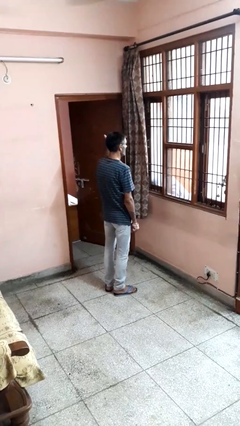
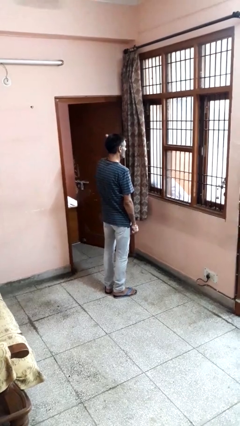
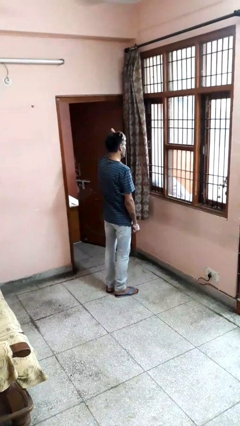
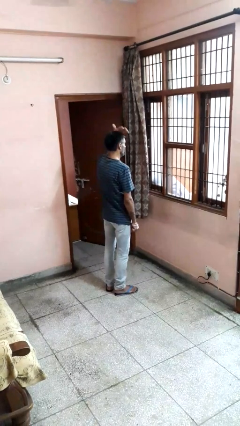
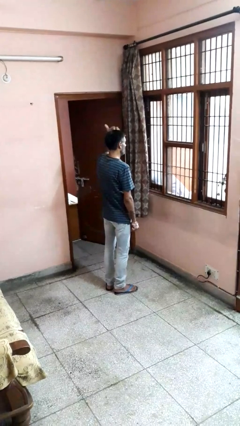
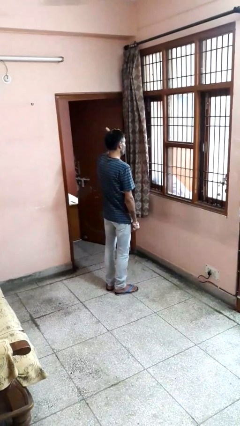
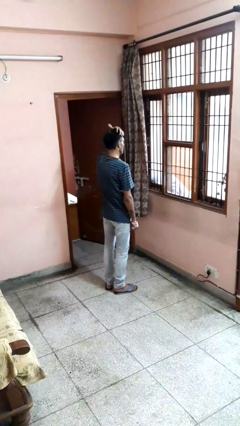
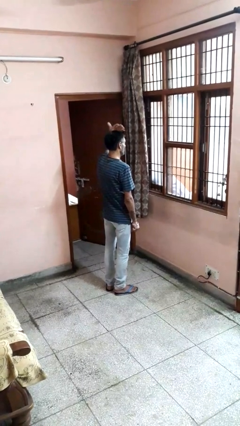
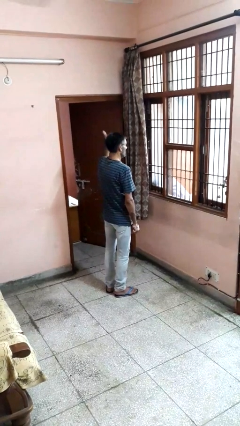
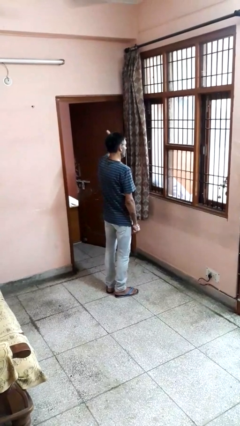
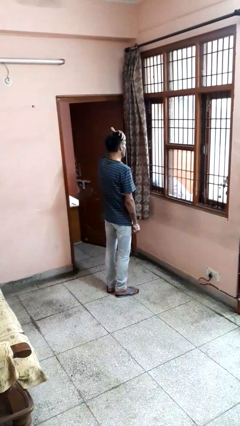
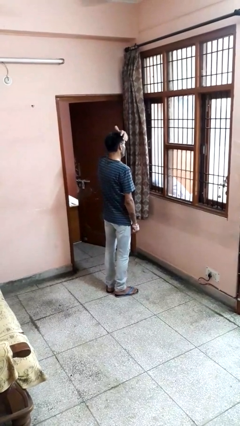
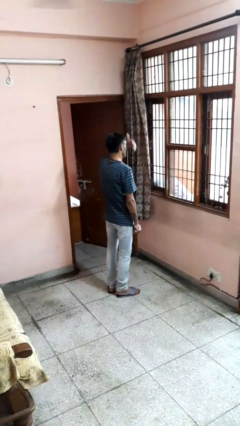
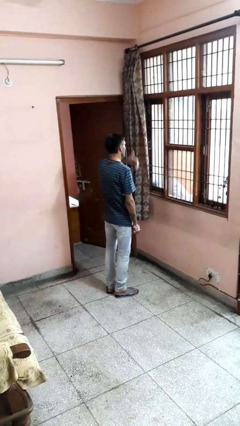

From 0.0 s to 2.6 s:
person strokes hair

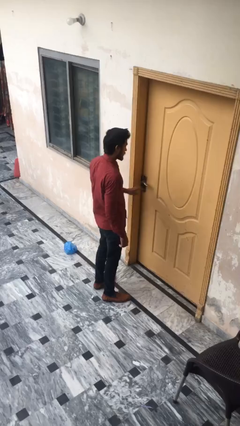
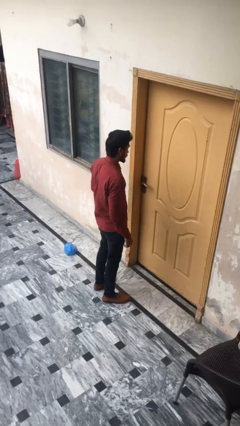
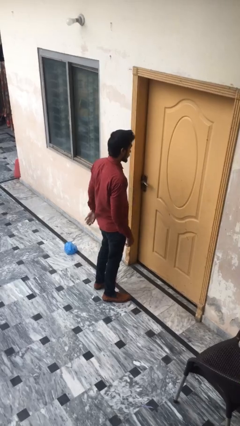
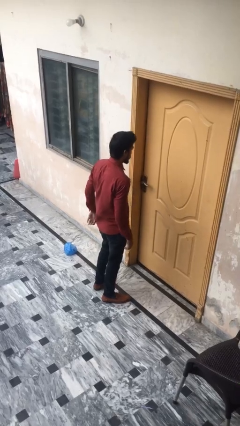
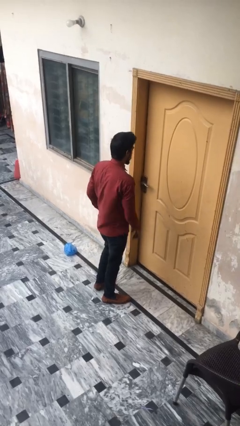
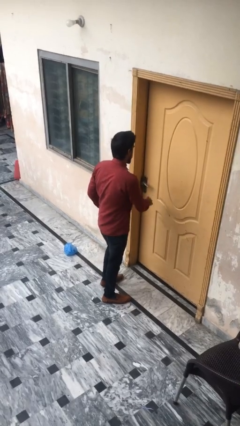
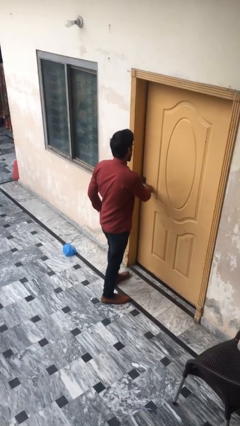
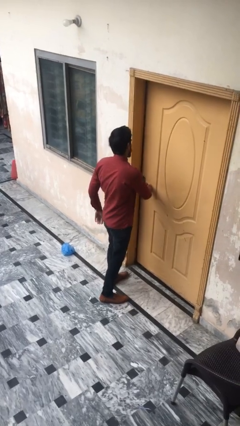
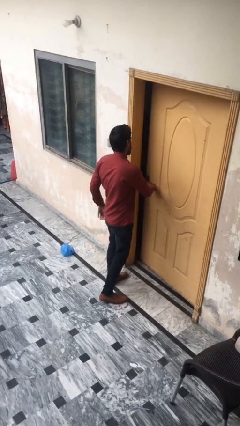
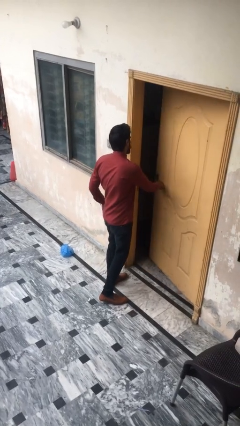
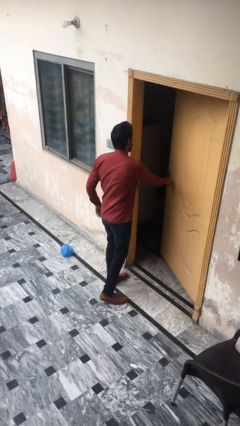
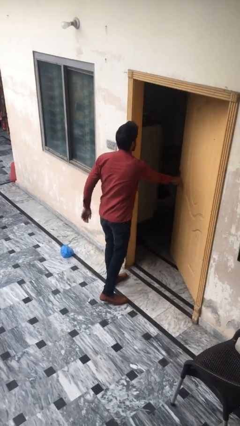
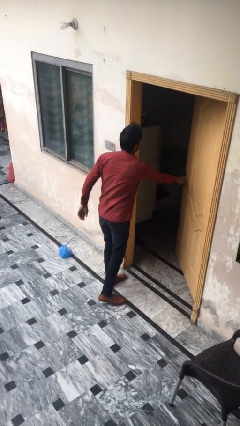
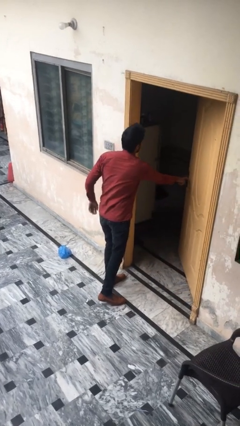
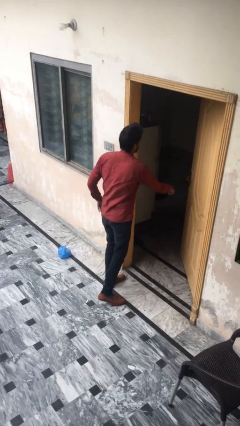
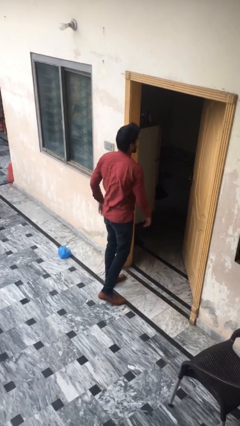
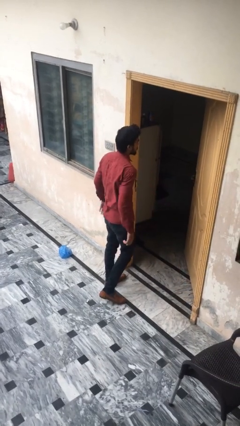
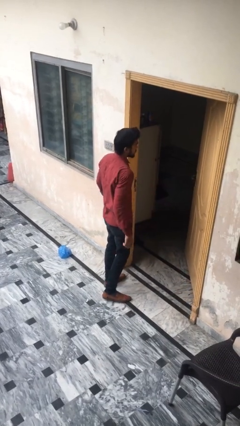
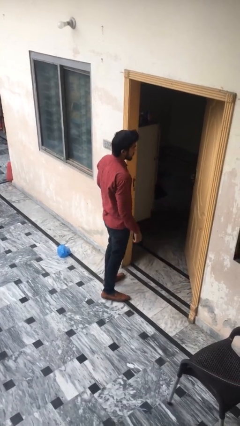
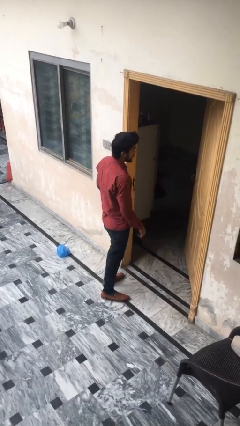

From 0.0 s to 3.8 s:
person opens facility door

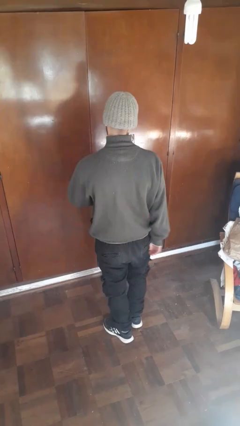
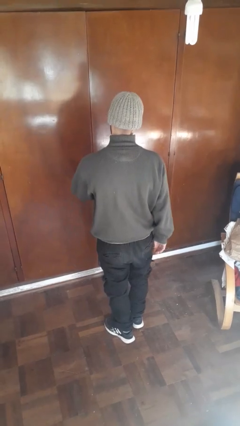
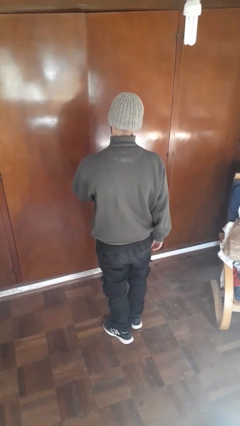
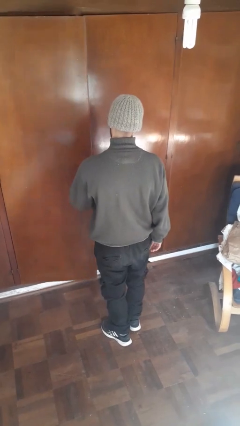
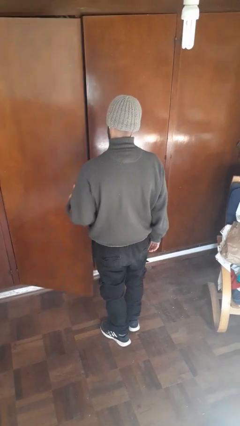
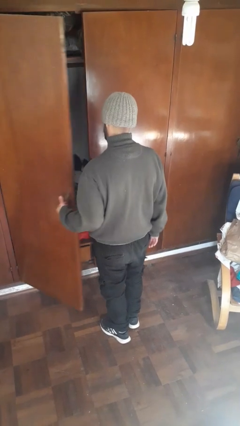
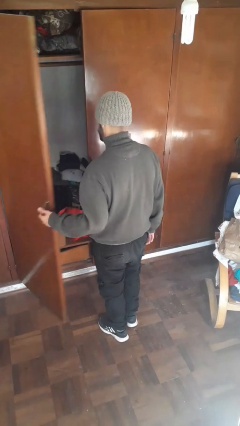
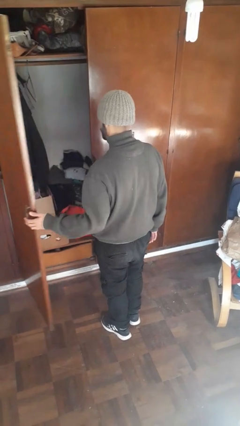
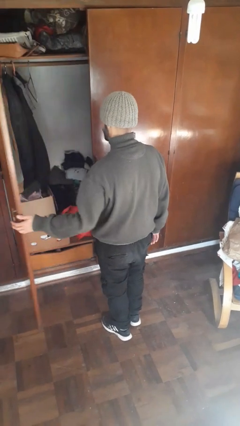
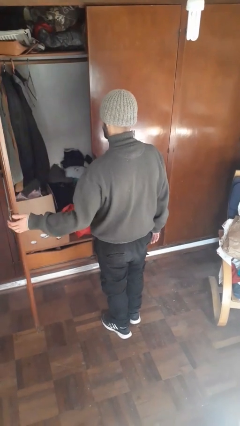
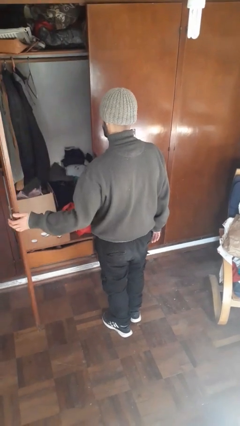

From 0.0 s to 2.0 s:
person opens closet door

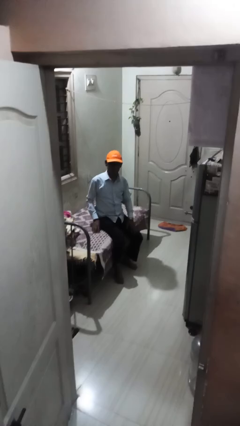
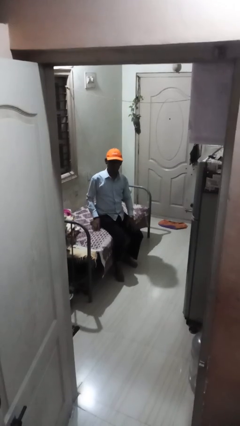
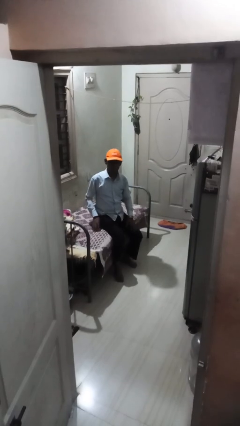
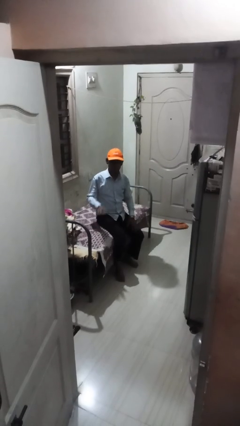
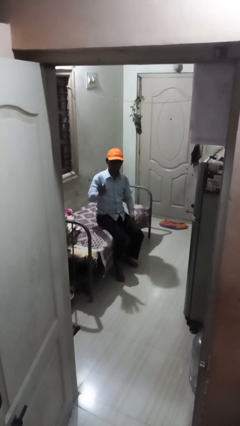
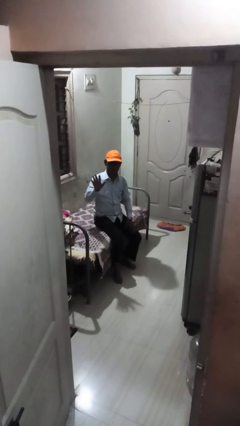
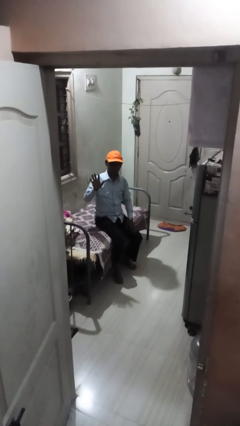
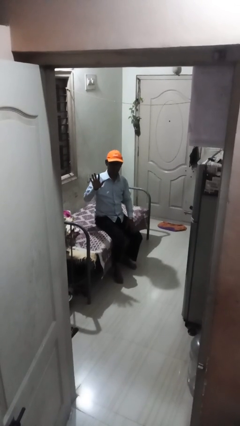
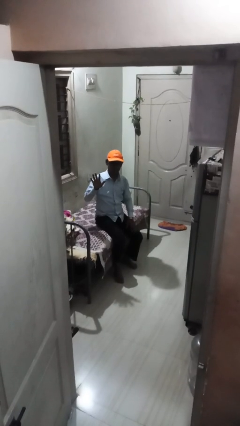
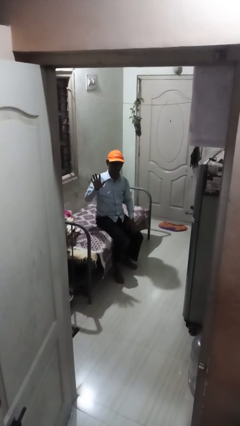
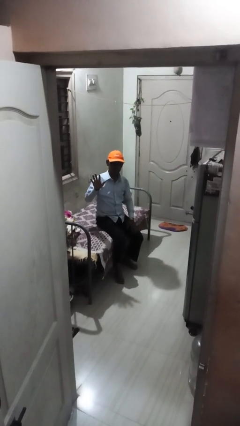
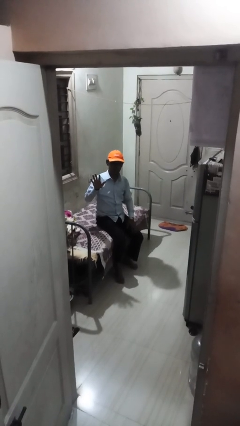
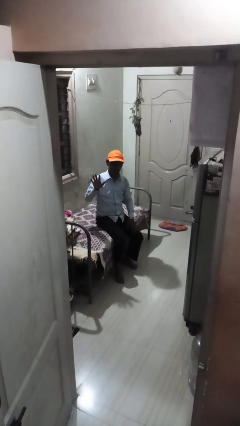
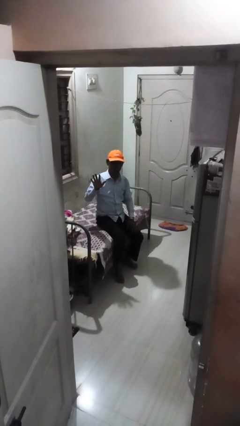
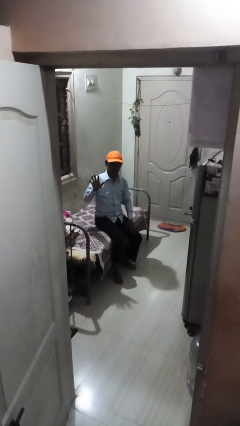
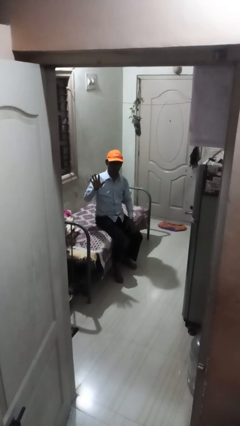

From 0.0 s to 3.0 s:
person gestures number five

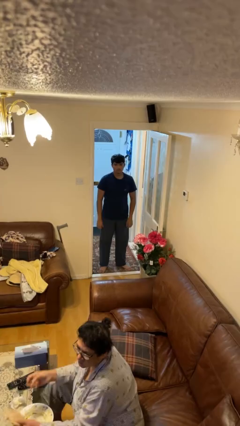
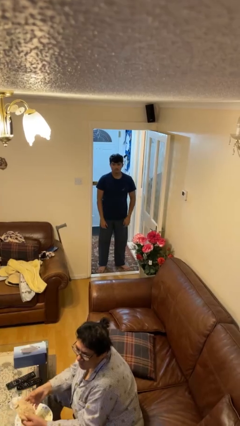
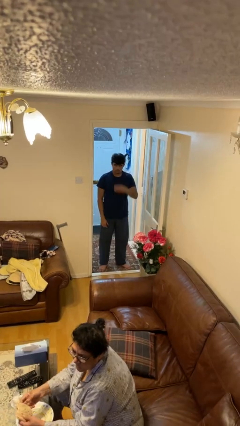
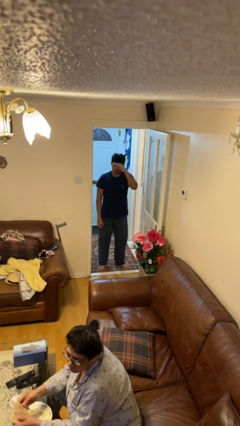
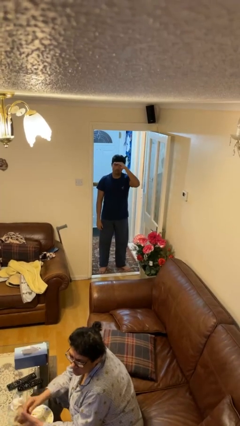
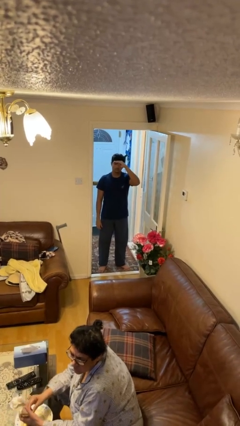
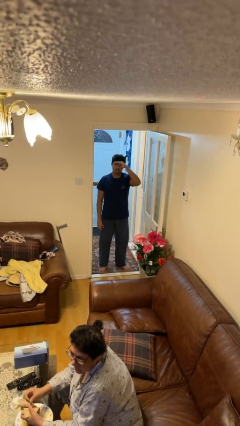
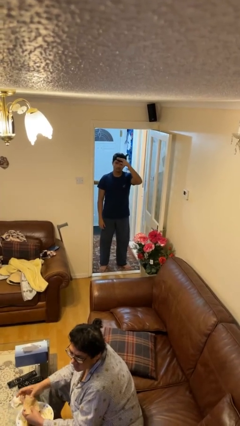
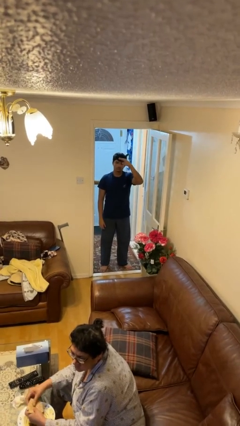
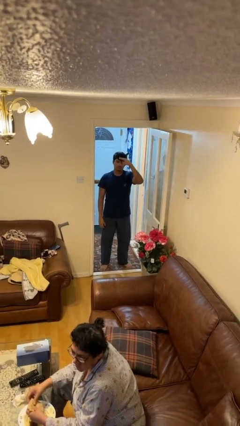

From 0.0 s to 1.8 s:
person salutes

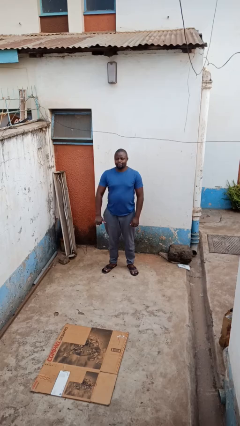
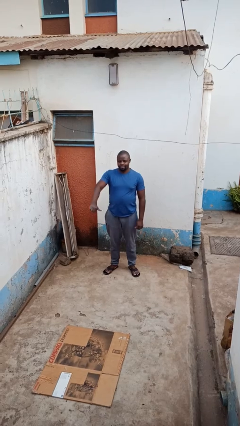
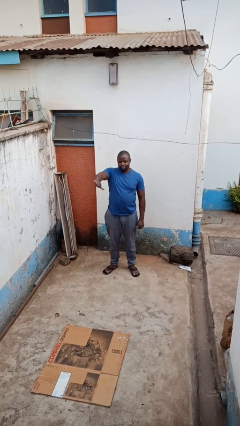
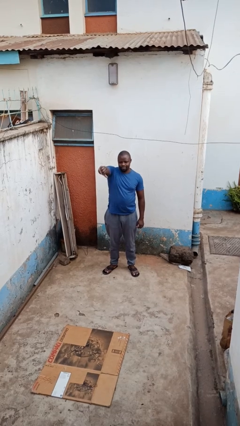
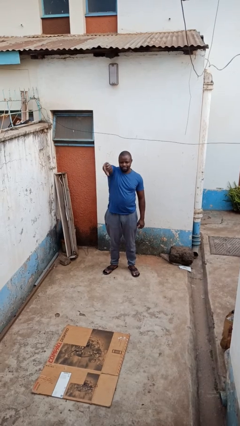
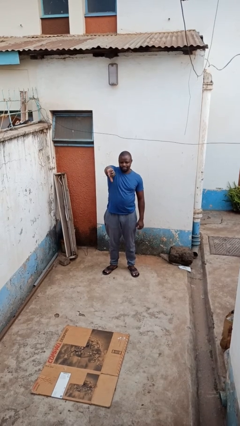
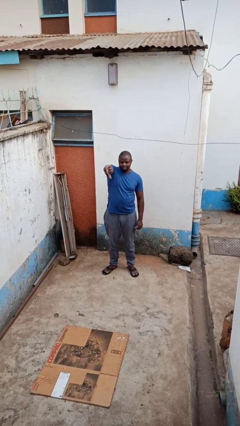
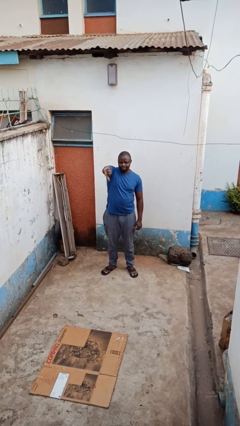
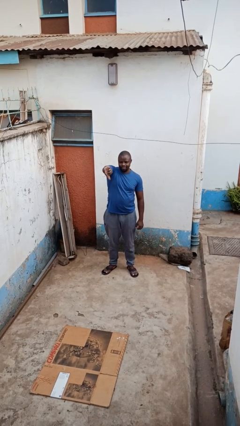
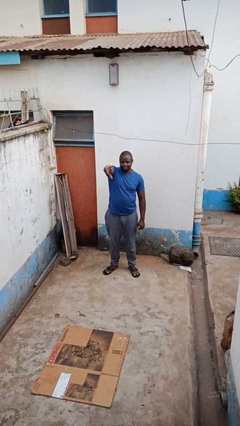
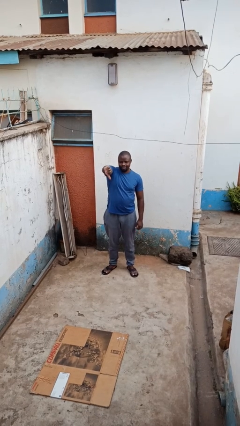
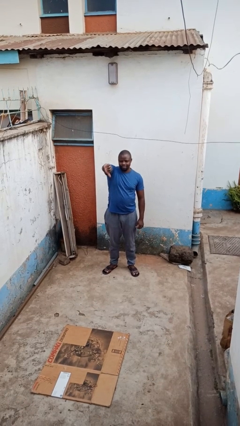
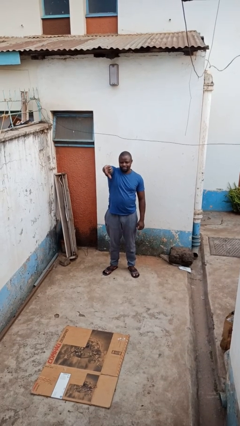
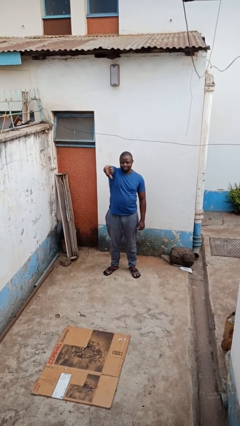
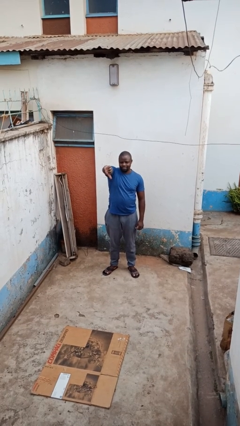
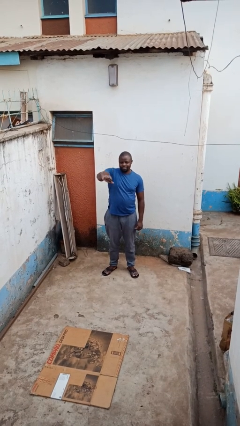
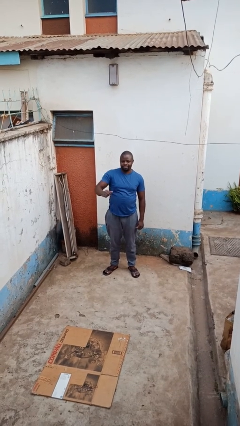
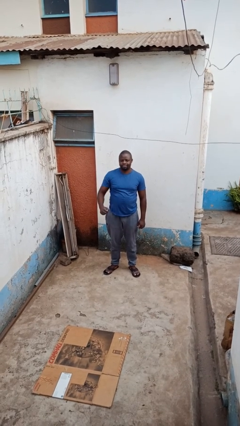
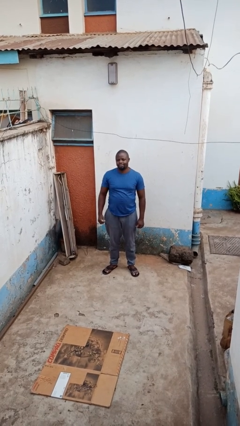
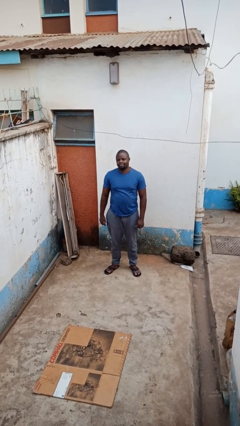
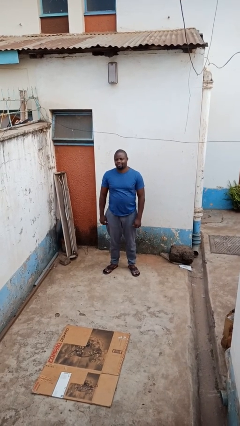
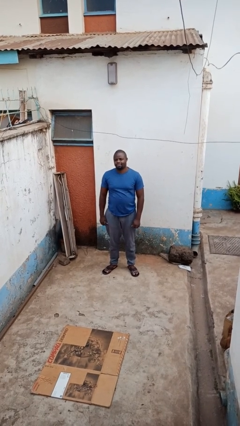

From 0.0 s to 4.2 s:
person gestures thumbs down
